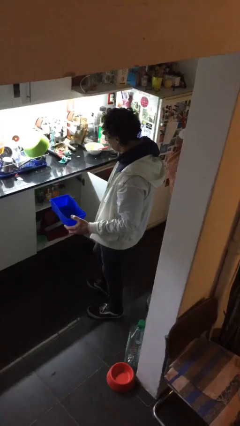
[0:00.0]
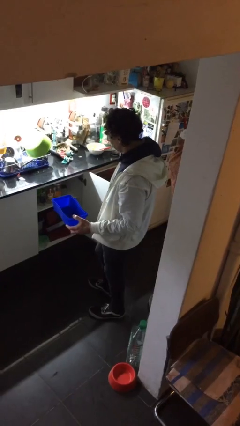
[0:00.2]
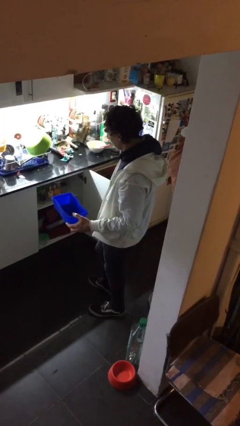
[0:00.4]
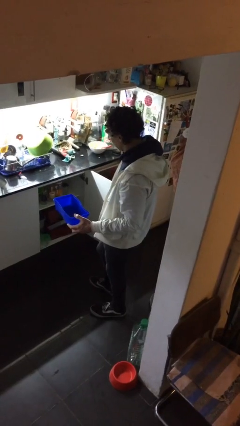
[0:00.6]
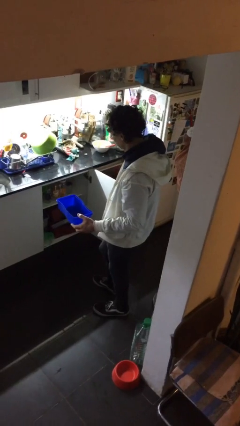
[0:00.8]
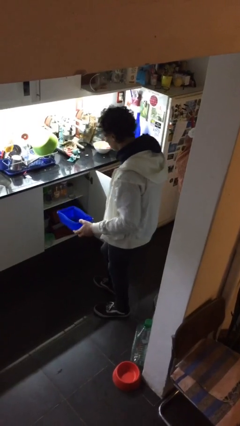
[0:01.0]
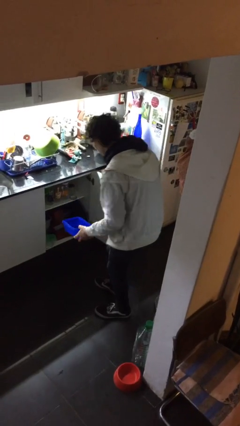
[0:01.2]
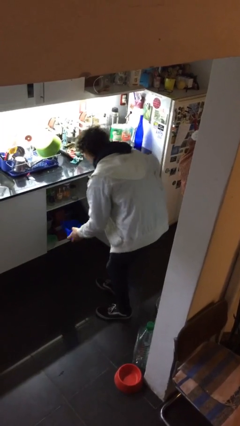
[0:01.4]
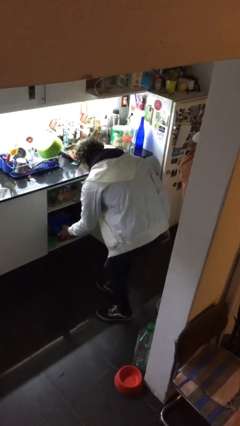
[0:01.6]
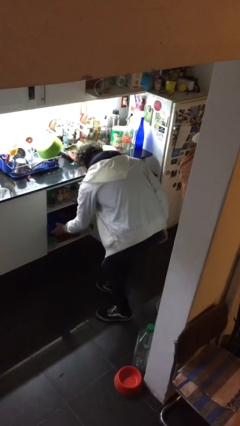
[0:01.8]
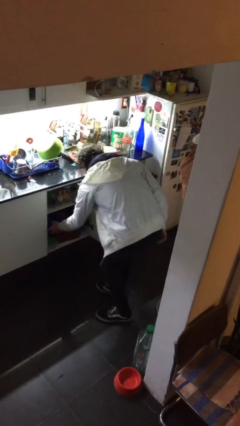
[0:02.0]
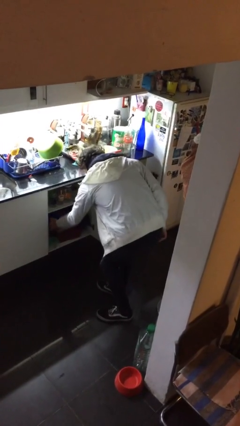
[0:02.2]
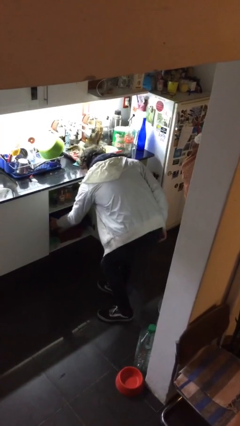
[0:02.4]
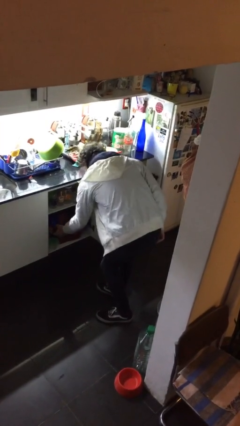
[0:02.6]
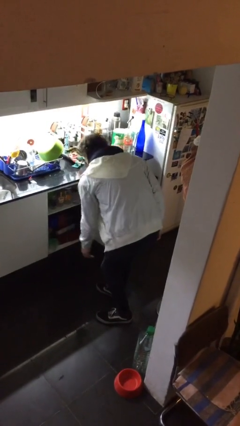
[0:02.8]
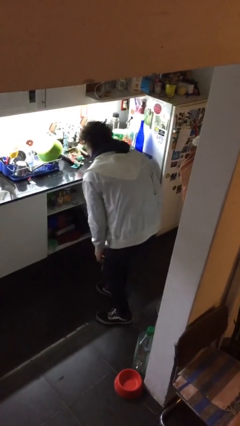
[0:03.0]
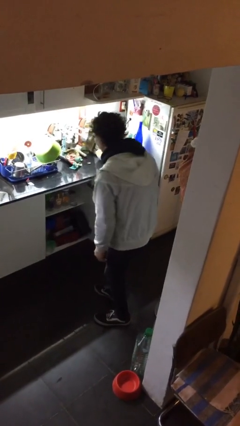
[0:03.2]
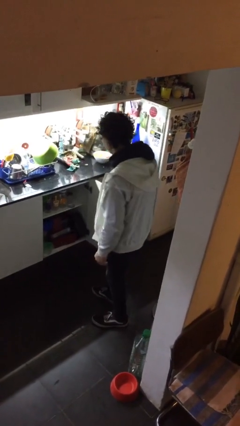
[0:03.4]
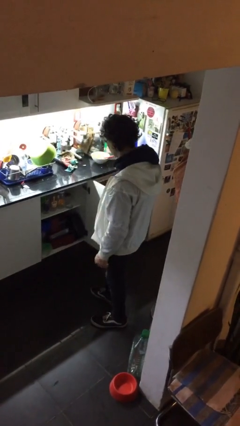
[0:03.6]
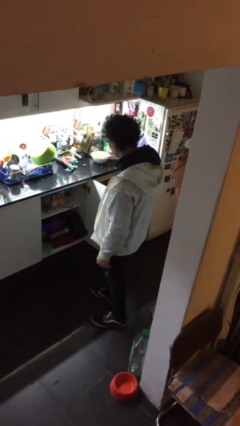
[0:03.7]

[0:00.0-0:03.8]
person puts down object into cabinet

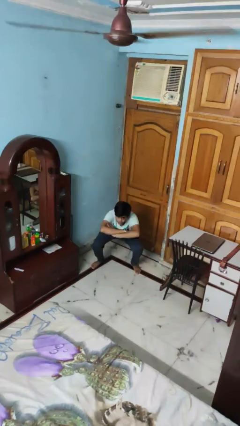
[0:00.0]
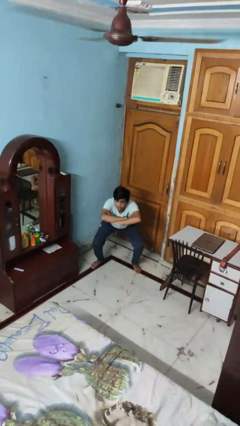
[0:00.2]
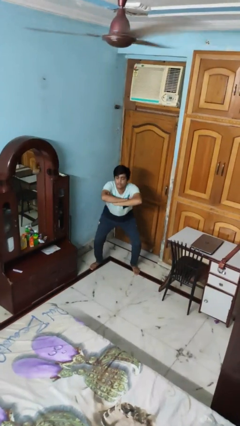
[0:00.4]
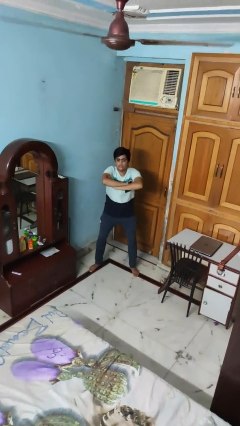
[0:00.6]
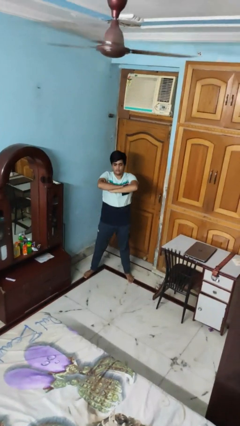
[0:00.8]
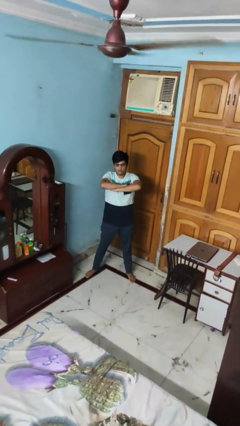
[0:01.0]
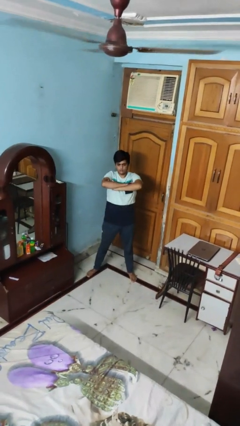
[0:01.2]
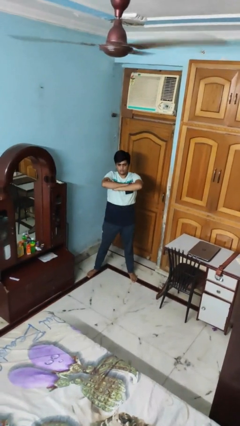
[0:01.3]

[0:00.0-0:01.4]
person stands up

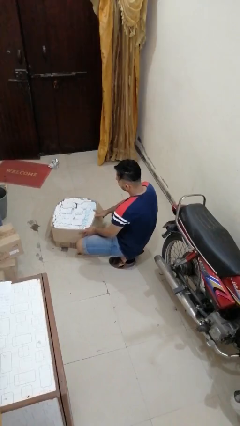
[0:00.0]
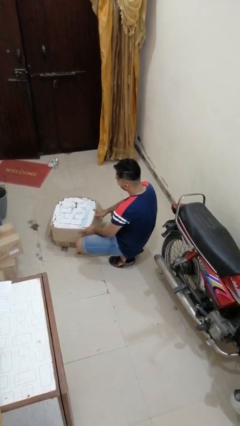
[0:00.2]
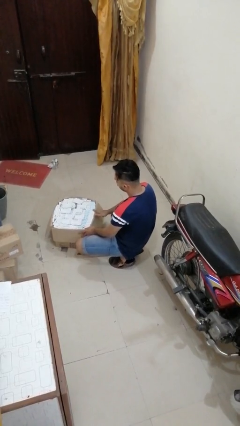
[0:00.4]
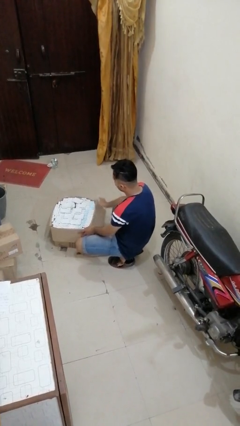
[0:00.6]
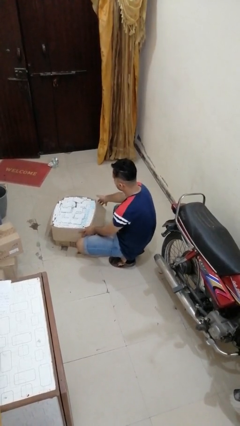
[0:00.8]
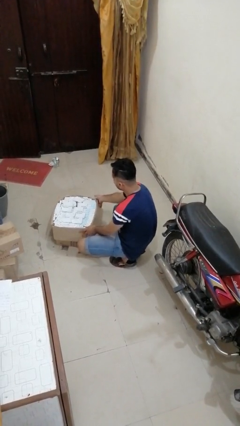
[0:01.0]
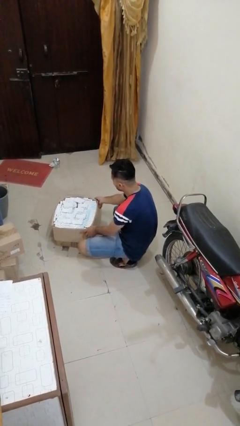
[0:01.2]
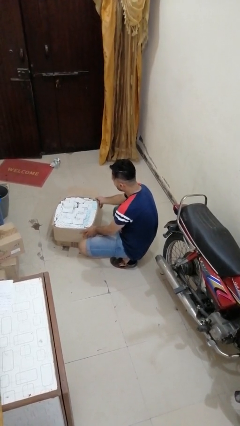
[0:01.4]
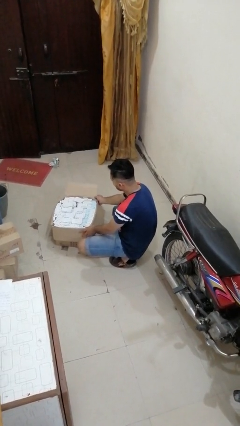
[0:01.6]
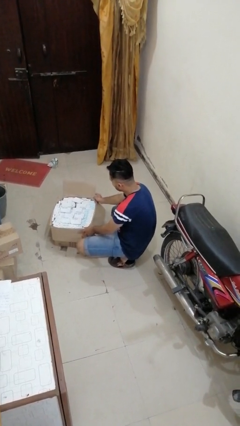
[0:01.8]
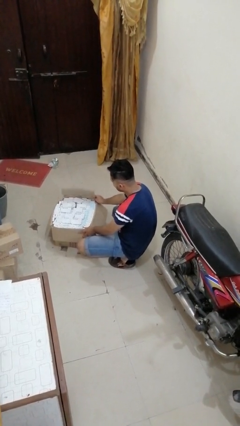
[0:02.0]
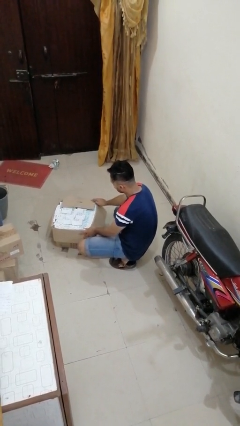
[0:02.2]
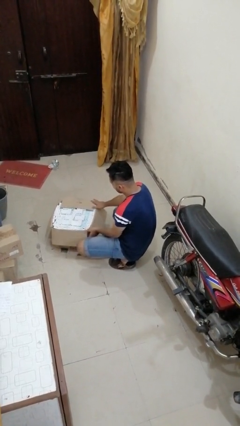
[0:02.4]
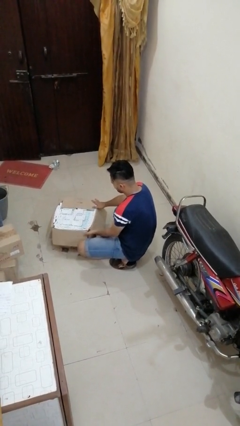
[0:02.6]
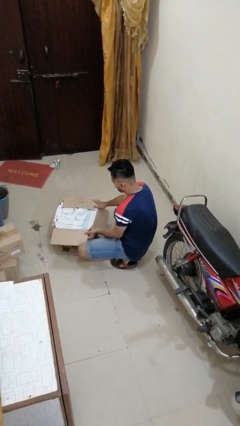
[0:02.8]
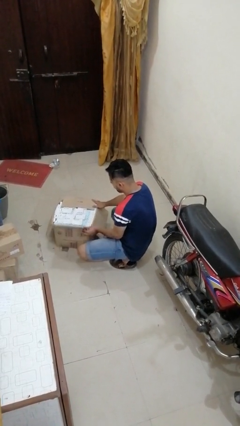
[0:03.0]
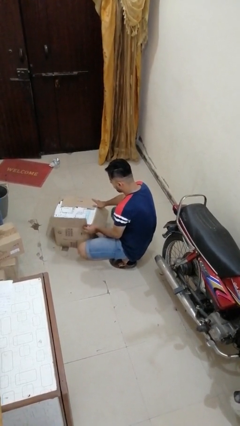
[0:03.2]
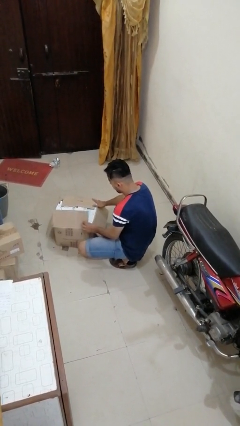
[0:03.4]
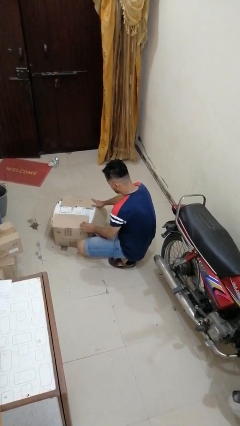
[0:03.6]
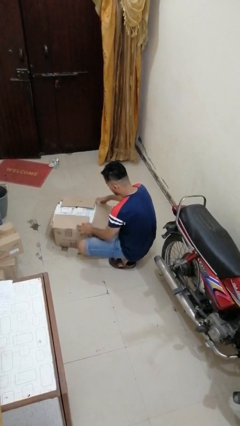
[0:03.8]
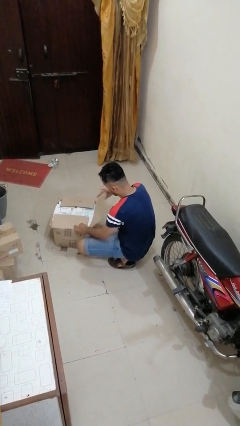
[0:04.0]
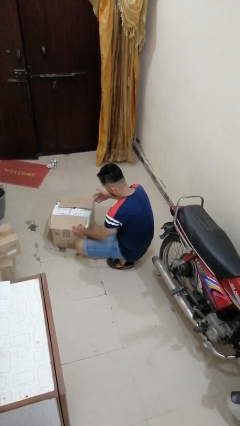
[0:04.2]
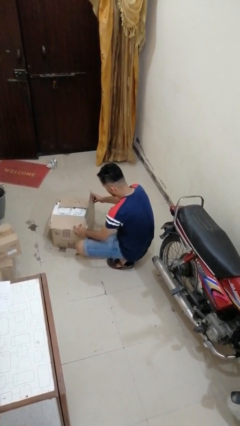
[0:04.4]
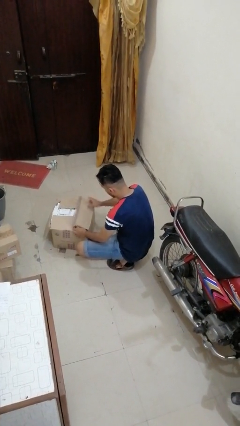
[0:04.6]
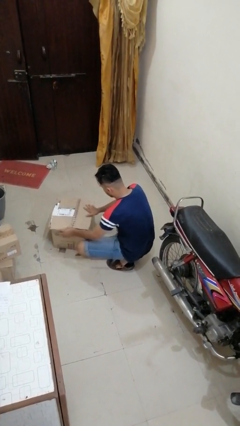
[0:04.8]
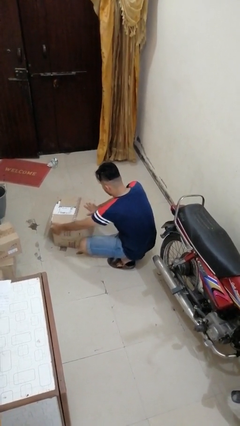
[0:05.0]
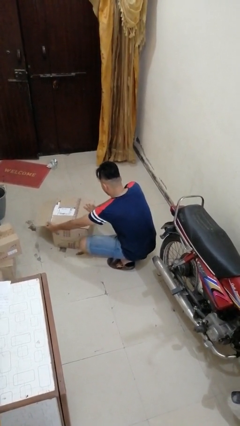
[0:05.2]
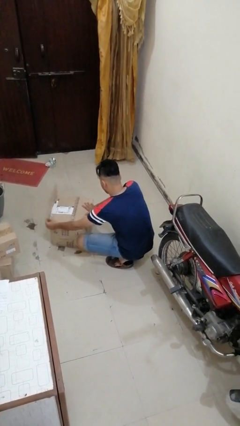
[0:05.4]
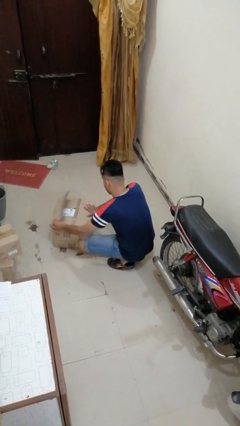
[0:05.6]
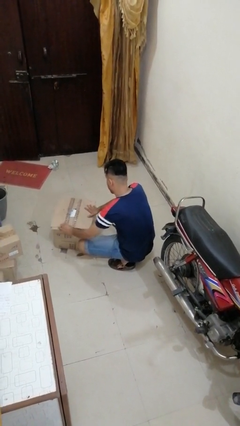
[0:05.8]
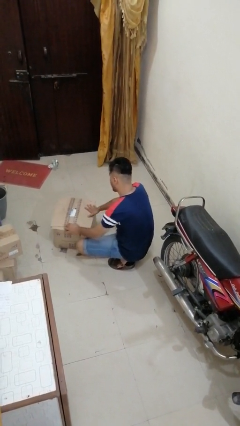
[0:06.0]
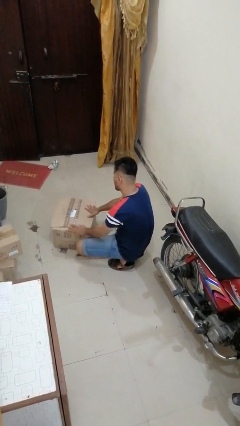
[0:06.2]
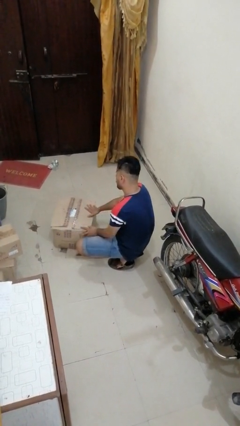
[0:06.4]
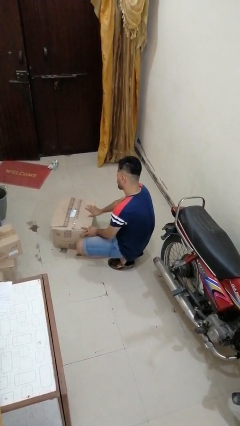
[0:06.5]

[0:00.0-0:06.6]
person closes box

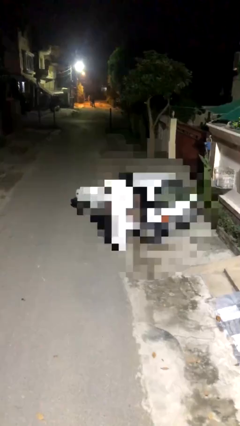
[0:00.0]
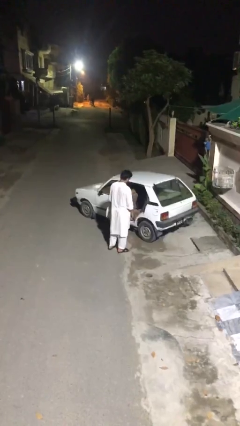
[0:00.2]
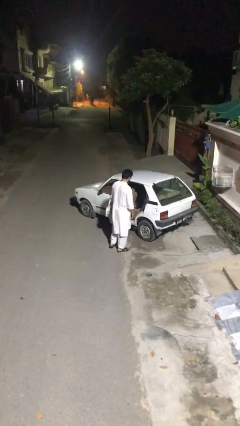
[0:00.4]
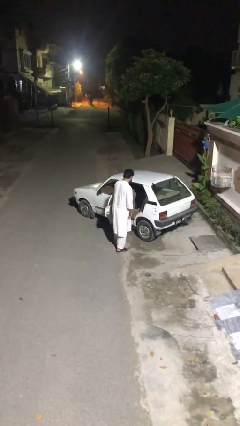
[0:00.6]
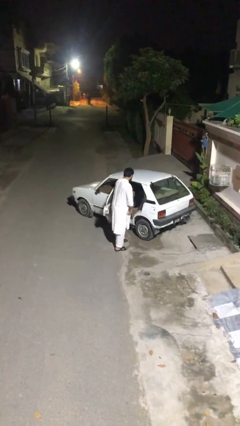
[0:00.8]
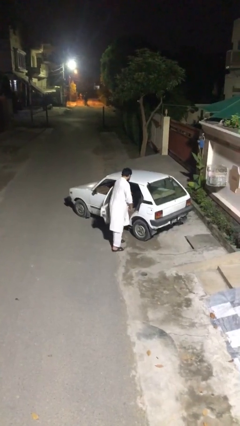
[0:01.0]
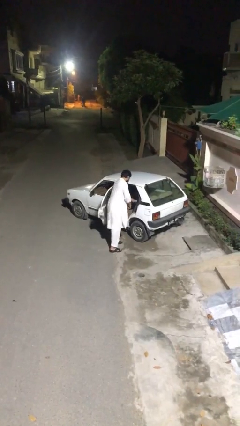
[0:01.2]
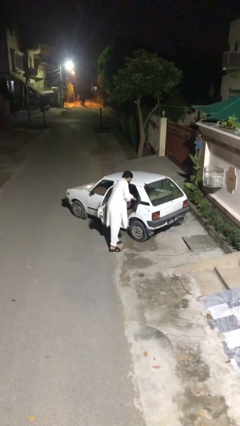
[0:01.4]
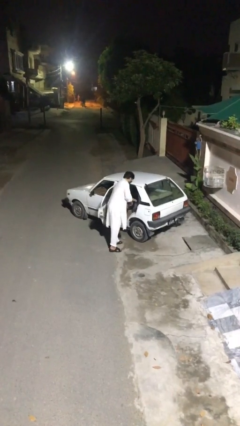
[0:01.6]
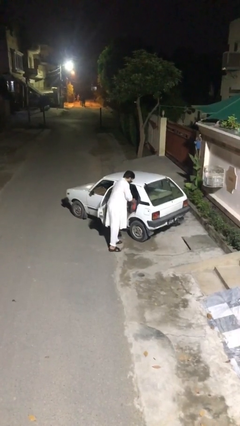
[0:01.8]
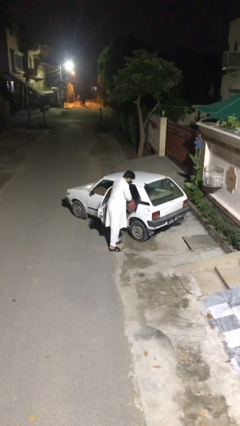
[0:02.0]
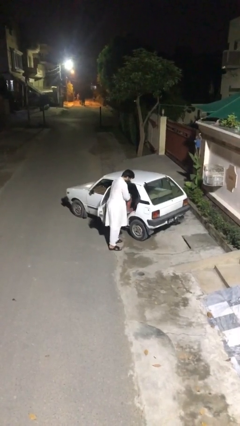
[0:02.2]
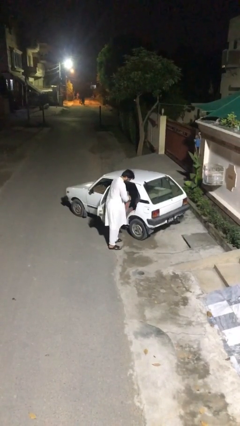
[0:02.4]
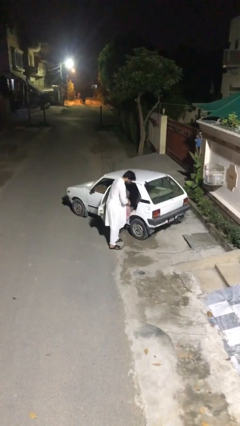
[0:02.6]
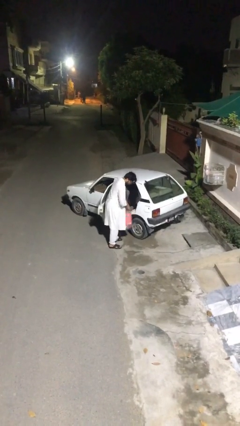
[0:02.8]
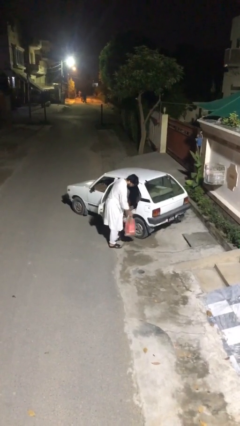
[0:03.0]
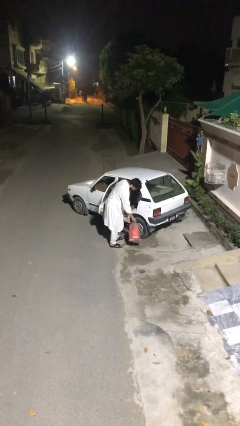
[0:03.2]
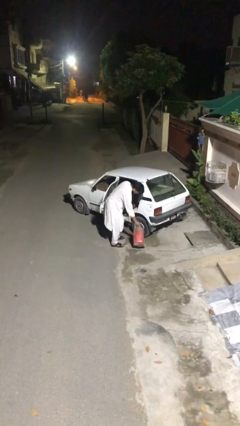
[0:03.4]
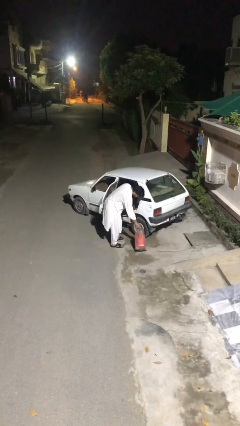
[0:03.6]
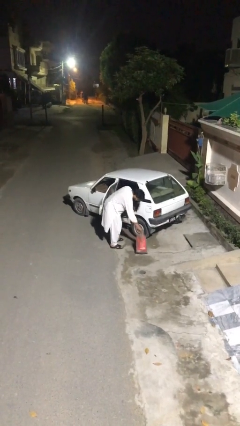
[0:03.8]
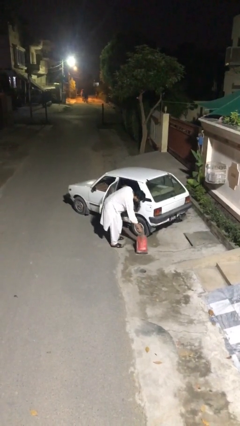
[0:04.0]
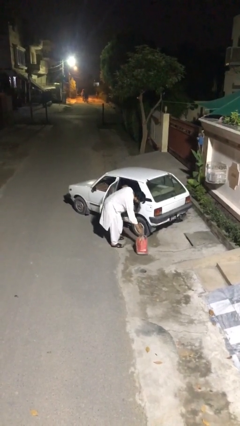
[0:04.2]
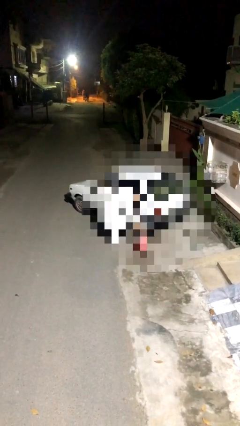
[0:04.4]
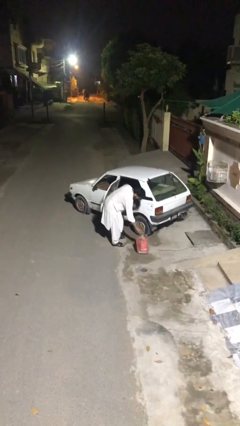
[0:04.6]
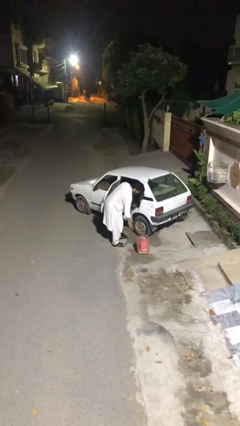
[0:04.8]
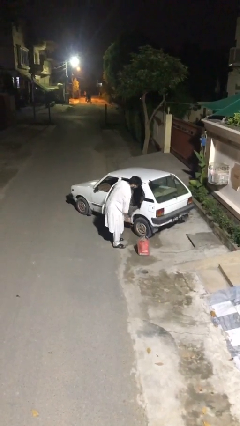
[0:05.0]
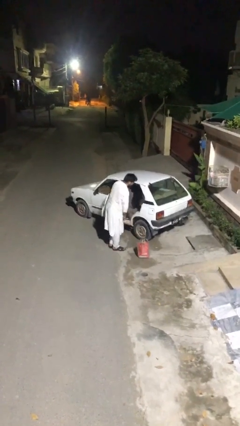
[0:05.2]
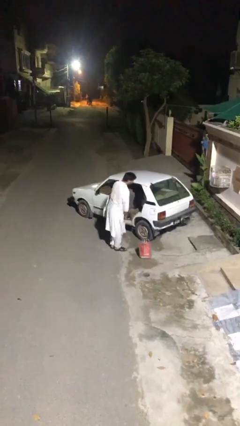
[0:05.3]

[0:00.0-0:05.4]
person unloads car

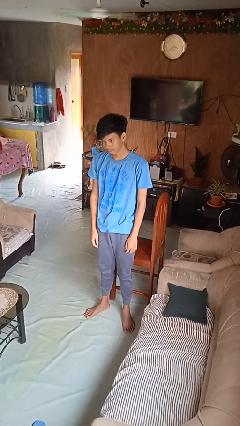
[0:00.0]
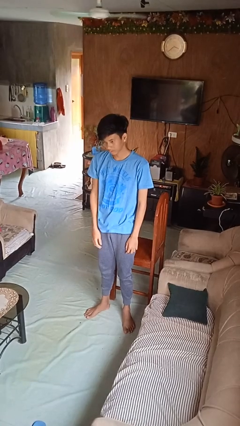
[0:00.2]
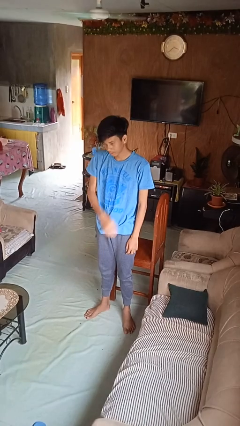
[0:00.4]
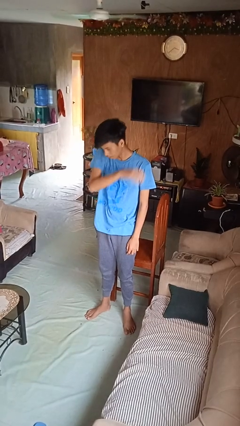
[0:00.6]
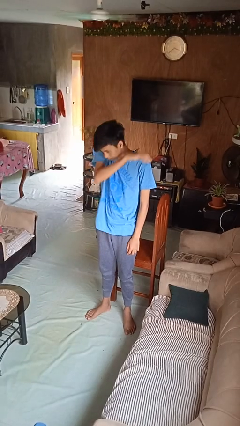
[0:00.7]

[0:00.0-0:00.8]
person sneezes into arm
